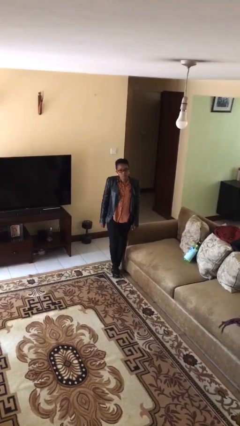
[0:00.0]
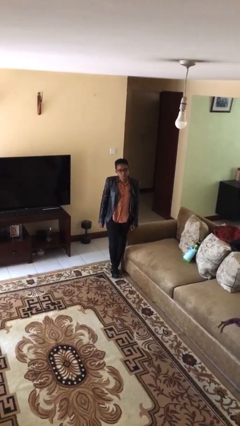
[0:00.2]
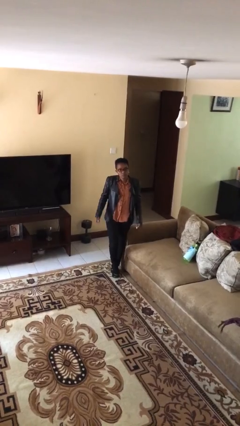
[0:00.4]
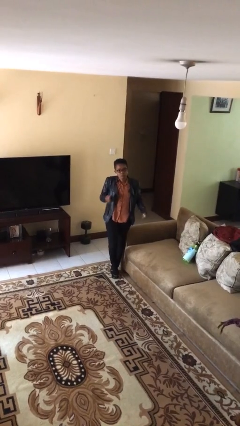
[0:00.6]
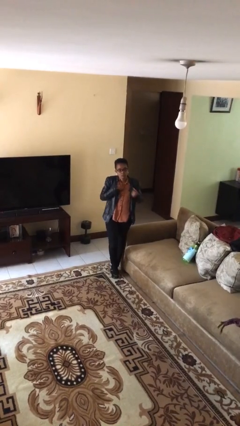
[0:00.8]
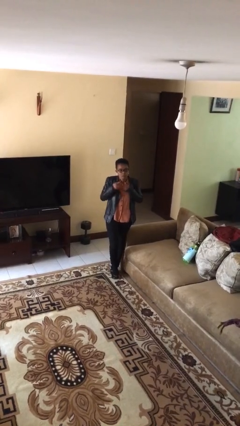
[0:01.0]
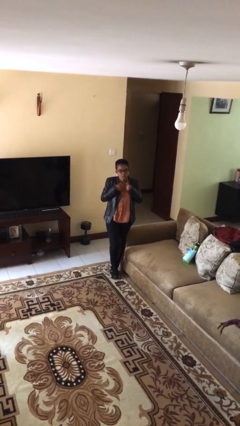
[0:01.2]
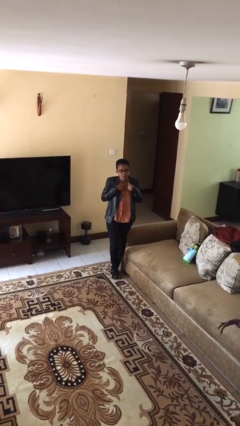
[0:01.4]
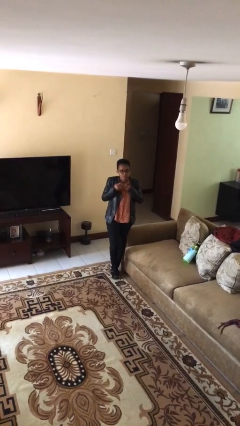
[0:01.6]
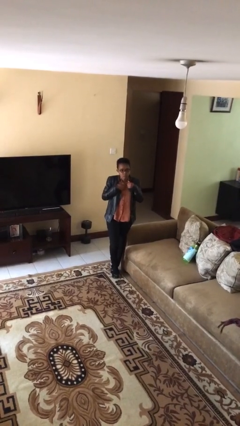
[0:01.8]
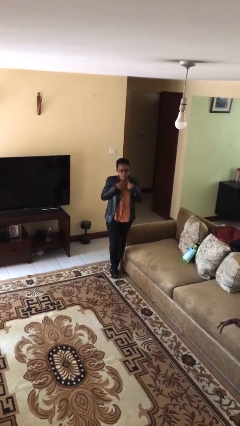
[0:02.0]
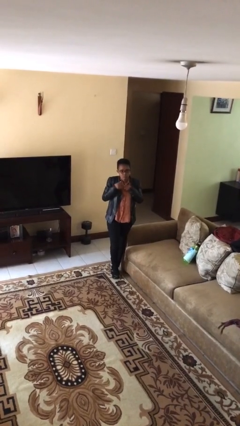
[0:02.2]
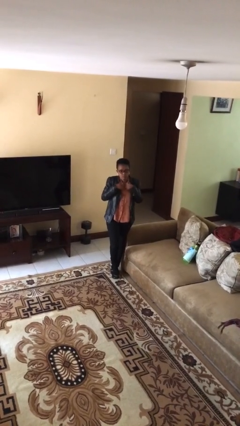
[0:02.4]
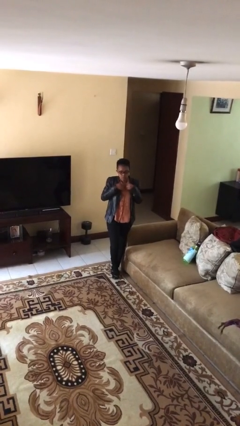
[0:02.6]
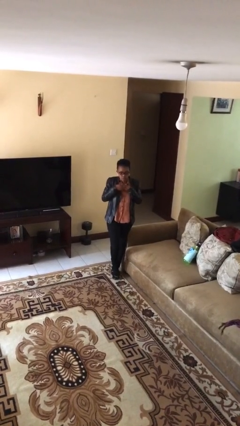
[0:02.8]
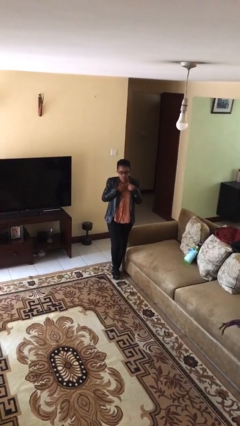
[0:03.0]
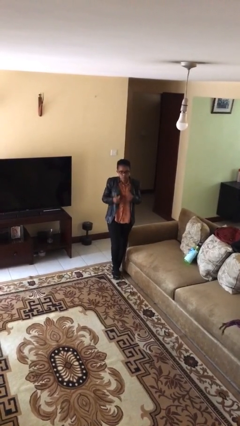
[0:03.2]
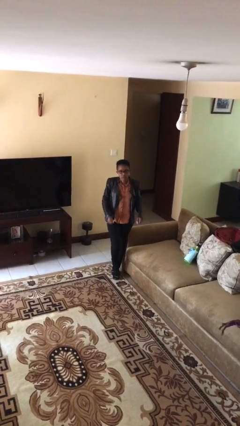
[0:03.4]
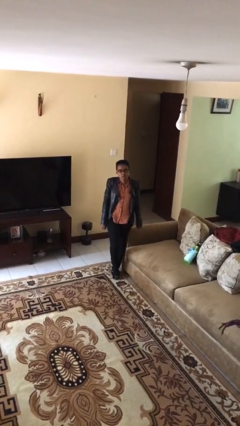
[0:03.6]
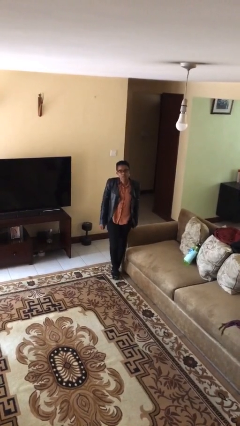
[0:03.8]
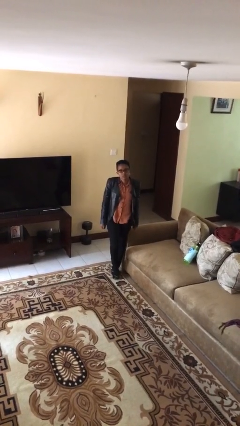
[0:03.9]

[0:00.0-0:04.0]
person drums on chest

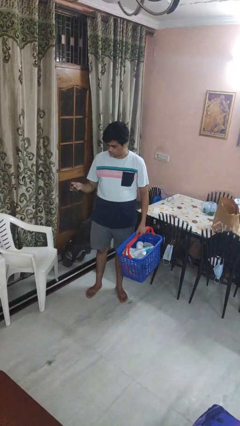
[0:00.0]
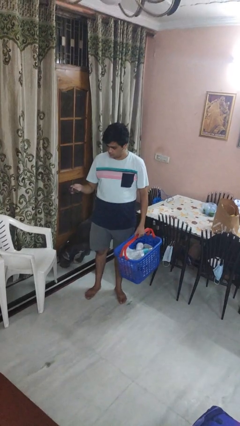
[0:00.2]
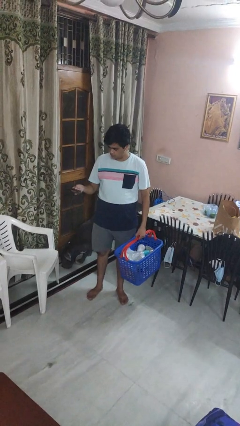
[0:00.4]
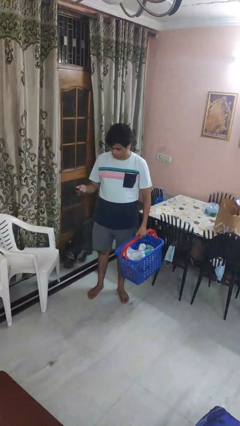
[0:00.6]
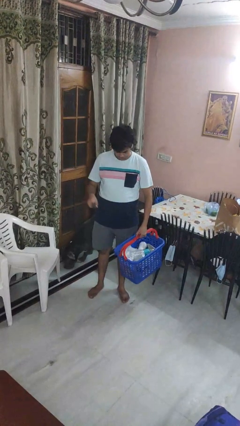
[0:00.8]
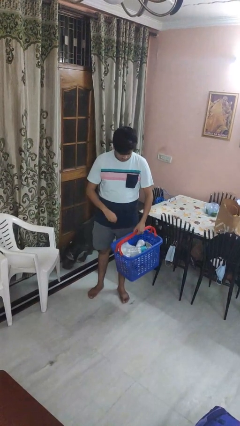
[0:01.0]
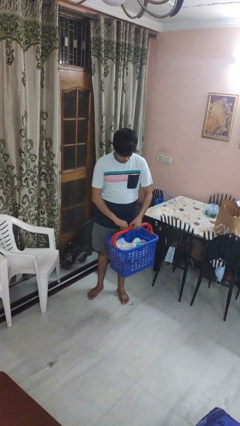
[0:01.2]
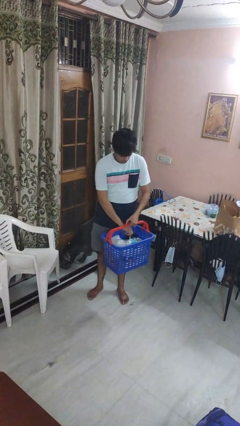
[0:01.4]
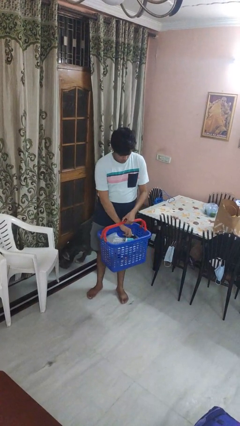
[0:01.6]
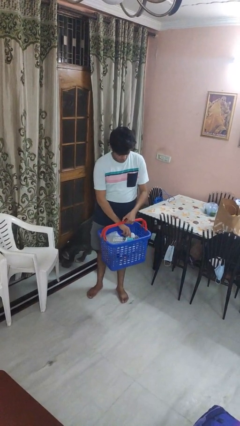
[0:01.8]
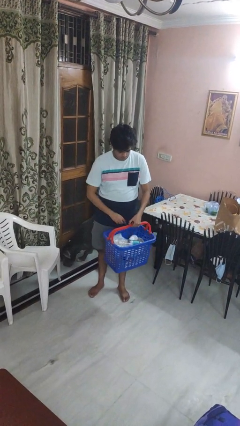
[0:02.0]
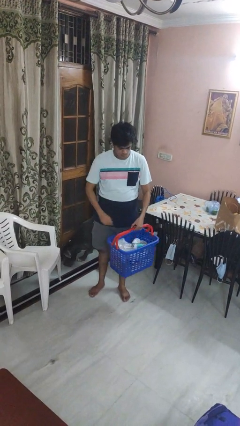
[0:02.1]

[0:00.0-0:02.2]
person puts object into basket

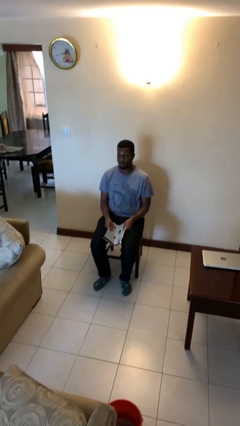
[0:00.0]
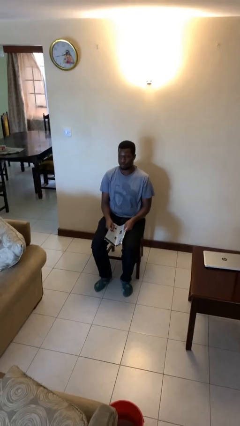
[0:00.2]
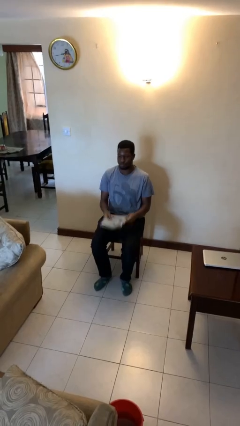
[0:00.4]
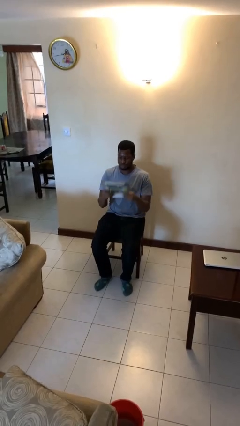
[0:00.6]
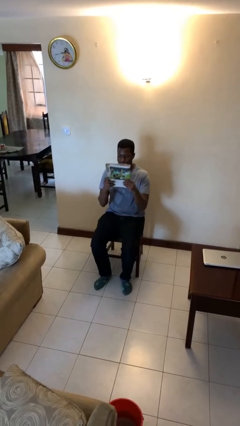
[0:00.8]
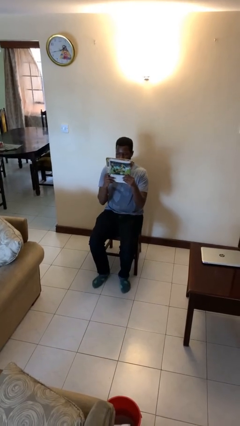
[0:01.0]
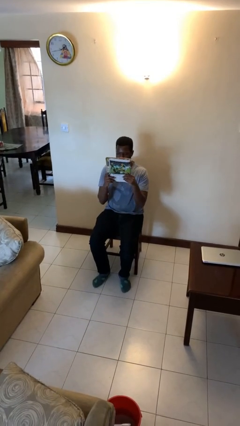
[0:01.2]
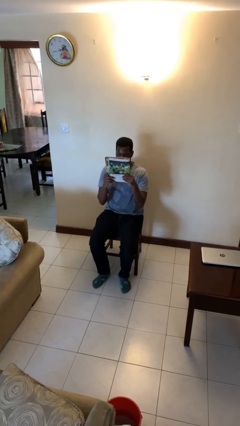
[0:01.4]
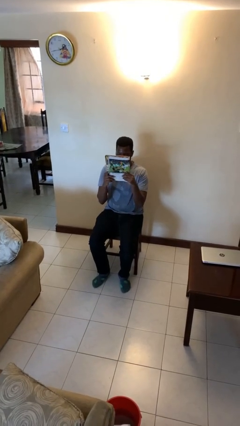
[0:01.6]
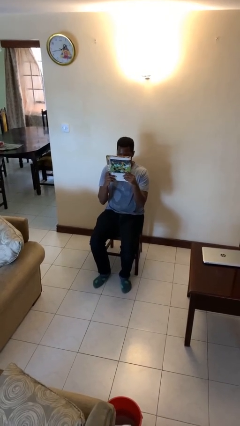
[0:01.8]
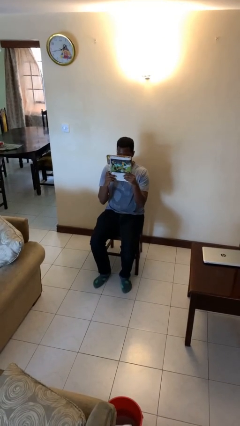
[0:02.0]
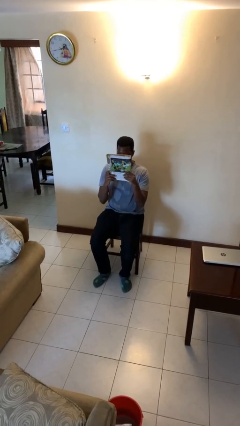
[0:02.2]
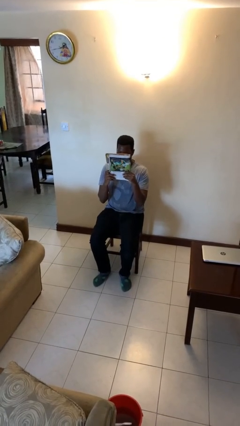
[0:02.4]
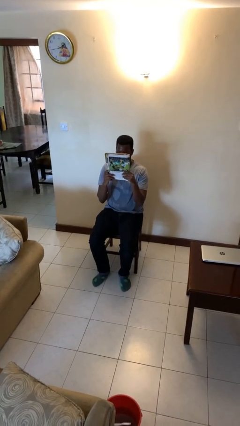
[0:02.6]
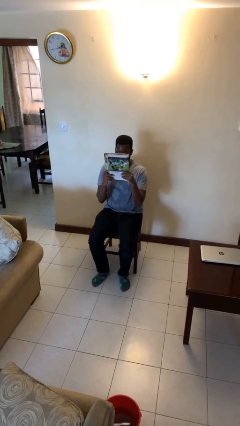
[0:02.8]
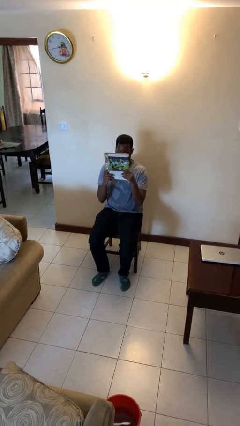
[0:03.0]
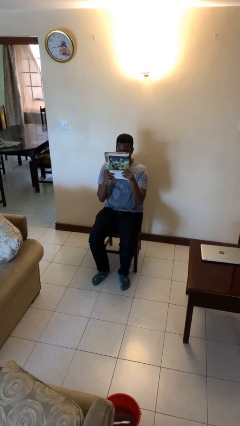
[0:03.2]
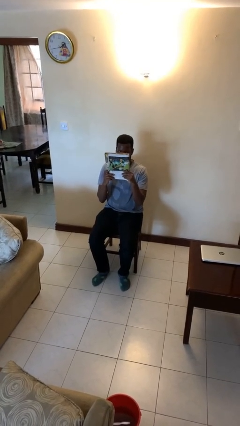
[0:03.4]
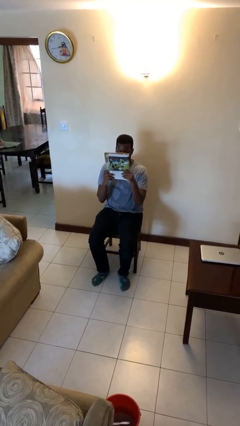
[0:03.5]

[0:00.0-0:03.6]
person reads document

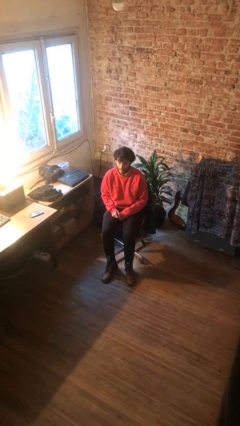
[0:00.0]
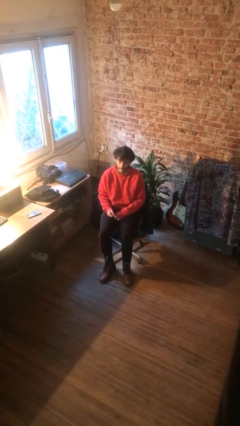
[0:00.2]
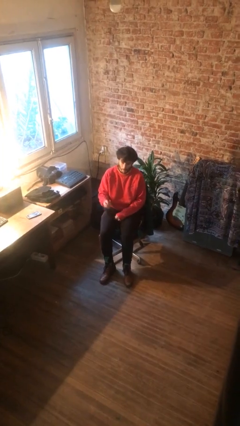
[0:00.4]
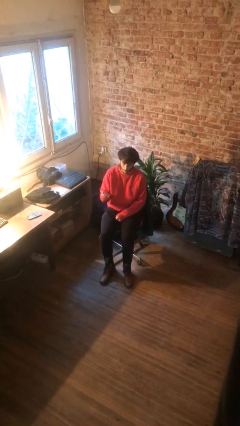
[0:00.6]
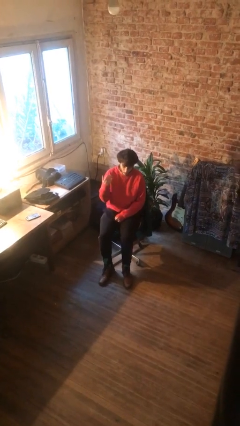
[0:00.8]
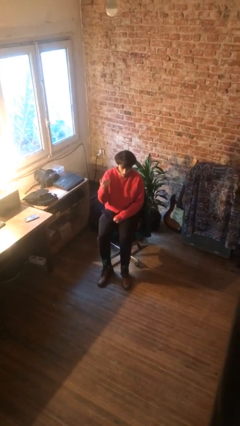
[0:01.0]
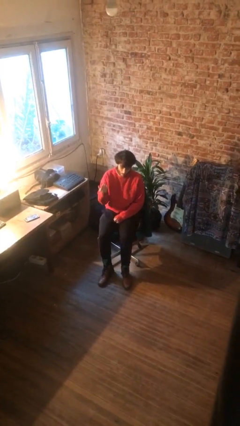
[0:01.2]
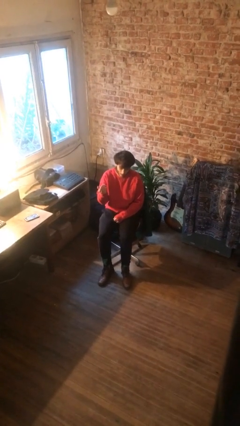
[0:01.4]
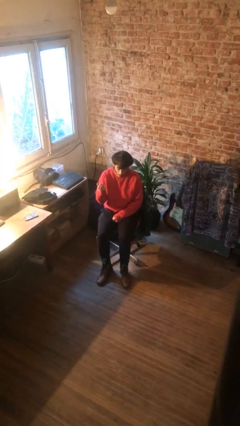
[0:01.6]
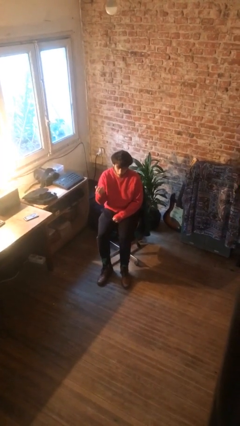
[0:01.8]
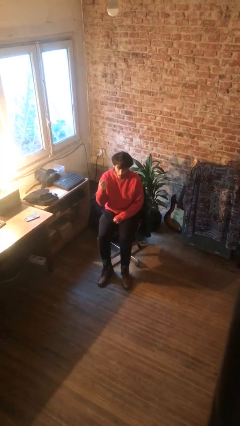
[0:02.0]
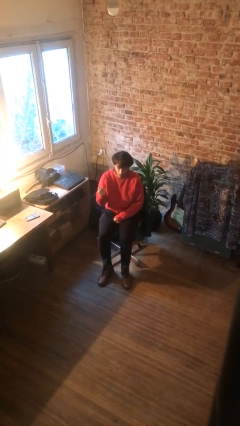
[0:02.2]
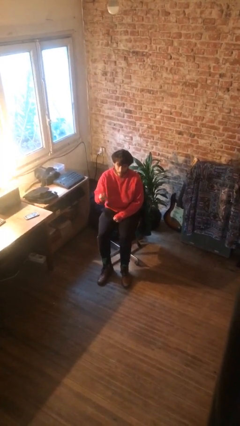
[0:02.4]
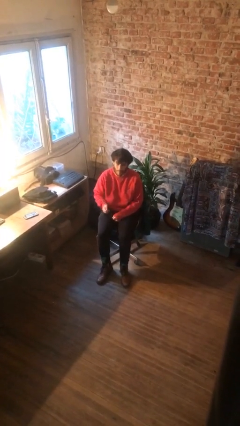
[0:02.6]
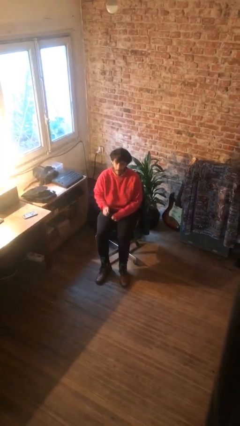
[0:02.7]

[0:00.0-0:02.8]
person gestures come here

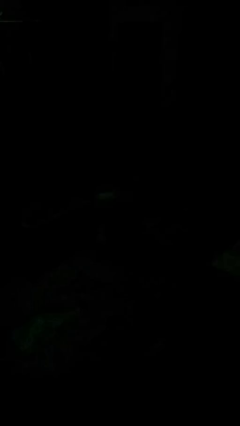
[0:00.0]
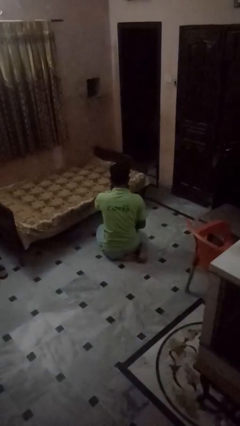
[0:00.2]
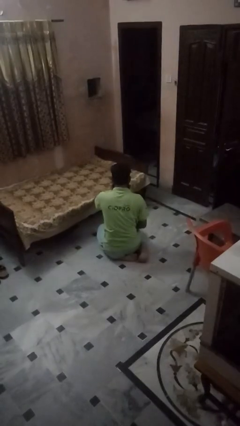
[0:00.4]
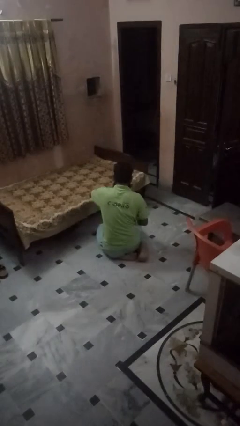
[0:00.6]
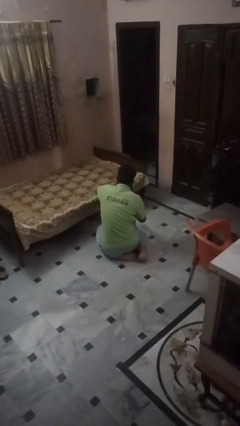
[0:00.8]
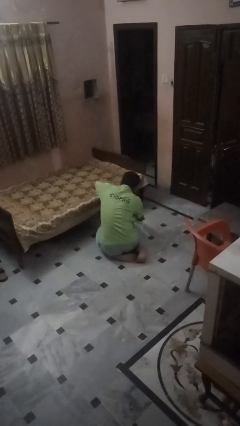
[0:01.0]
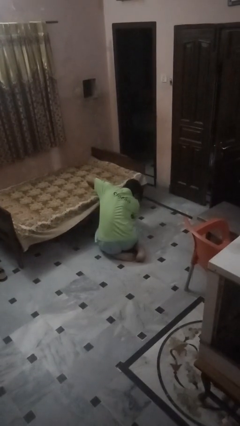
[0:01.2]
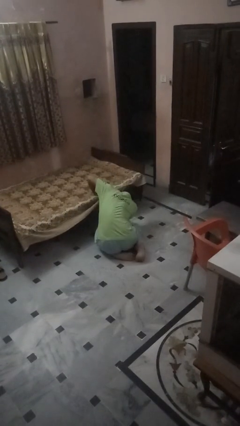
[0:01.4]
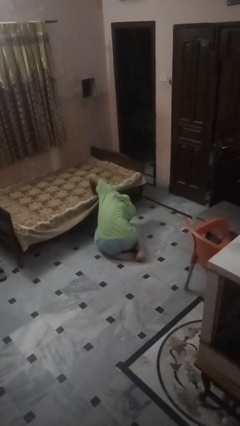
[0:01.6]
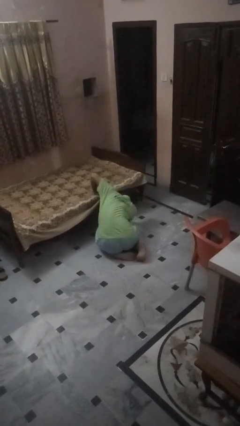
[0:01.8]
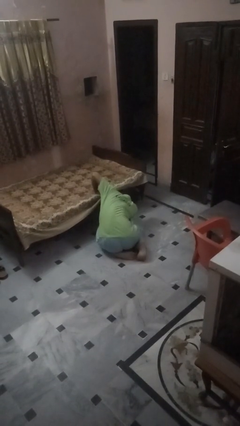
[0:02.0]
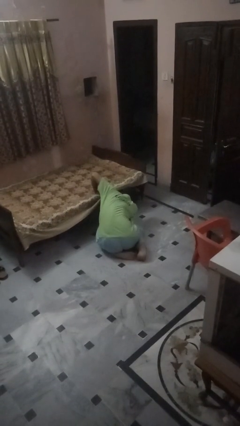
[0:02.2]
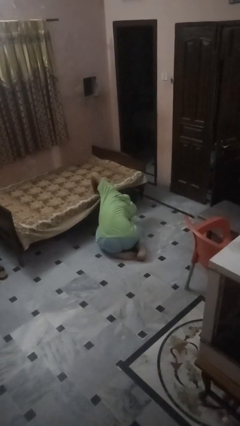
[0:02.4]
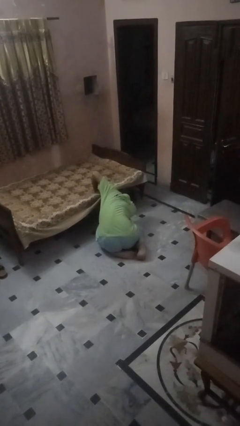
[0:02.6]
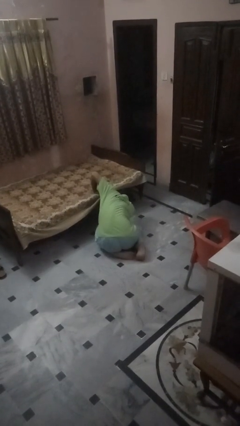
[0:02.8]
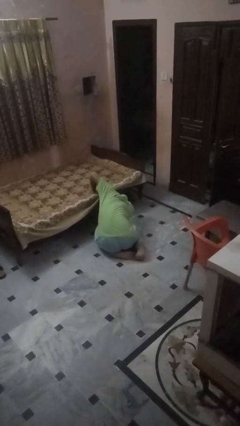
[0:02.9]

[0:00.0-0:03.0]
person searches under bed

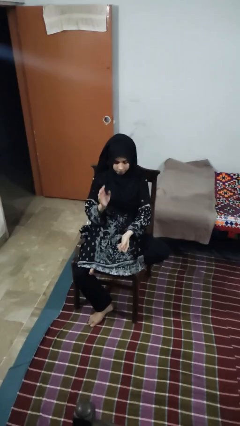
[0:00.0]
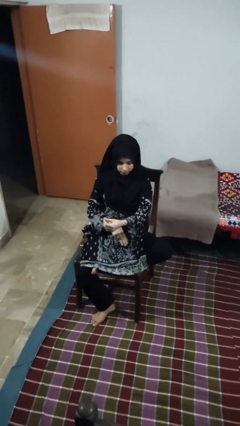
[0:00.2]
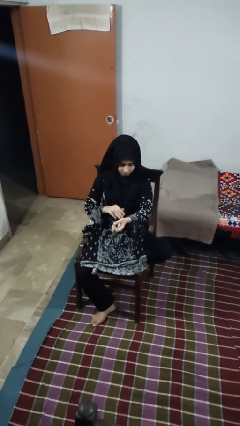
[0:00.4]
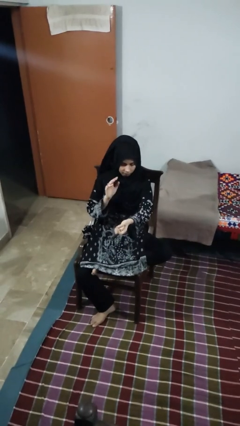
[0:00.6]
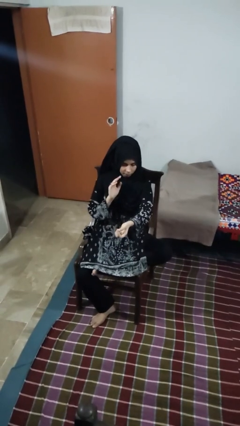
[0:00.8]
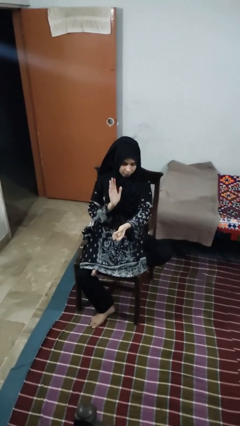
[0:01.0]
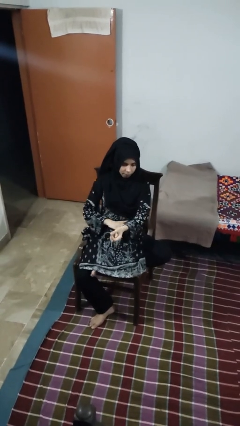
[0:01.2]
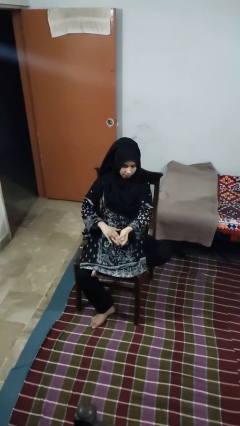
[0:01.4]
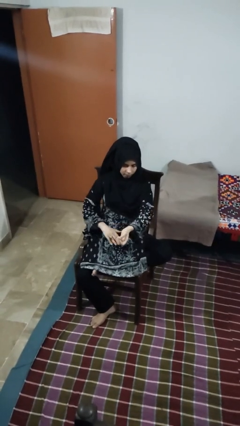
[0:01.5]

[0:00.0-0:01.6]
person swats bug

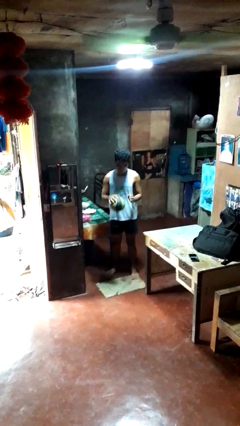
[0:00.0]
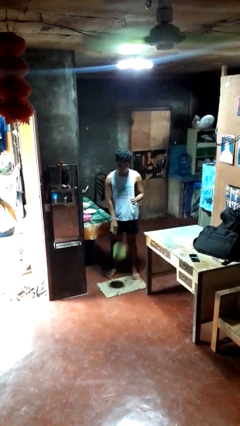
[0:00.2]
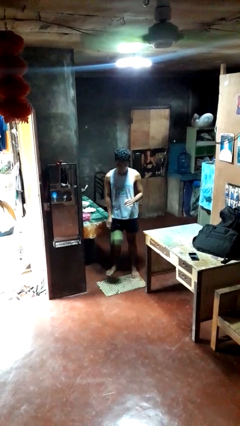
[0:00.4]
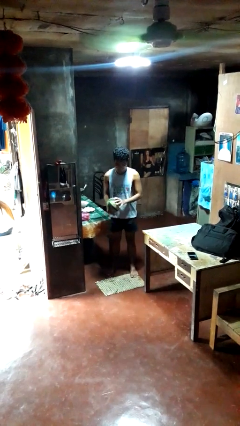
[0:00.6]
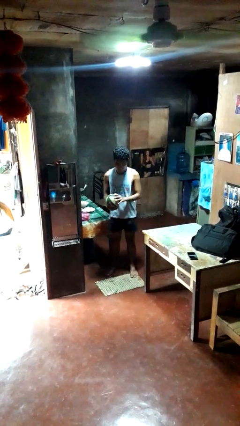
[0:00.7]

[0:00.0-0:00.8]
person bounces ball on floor
